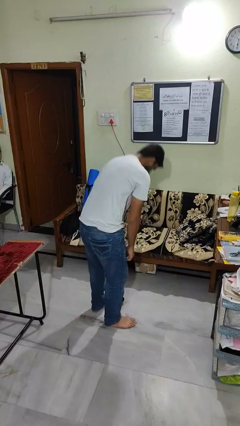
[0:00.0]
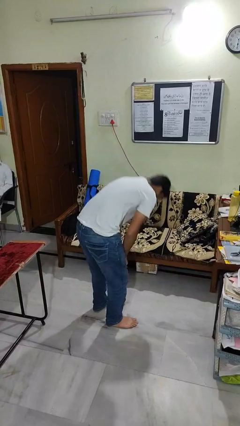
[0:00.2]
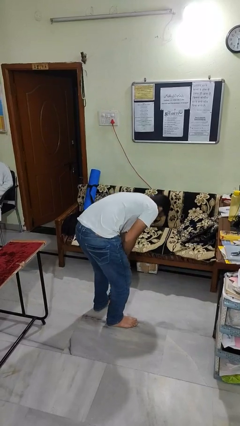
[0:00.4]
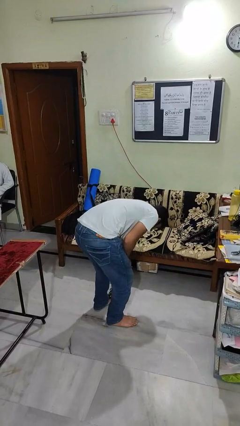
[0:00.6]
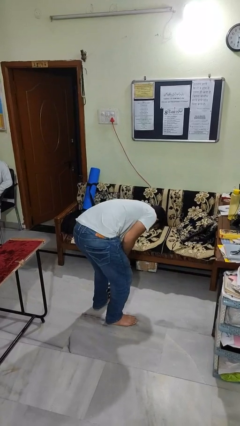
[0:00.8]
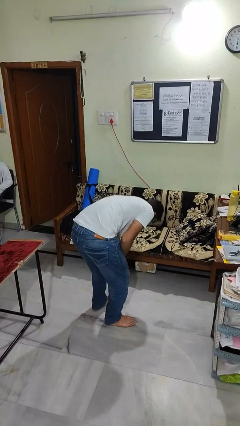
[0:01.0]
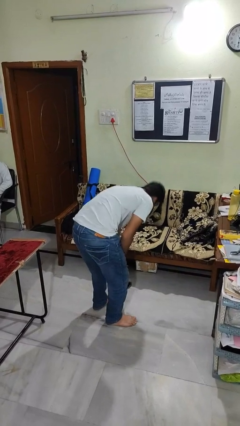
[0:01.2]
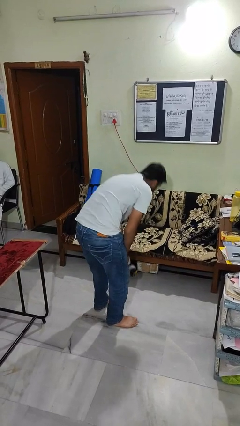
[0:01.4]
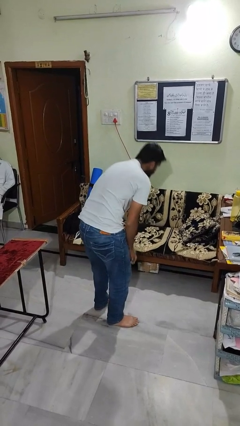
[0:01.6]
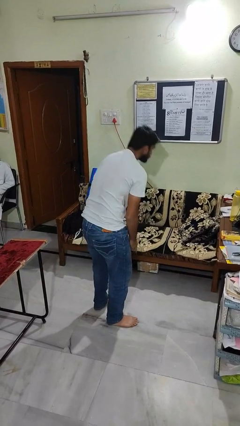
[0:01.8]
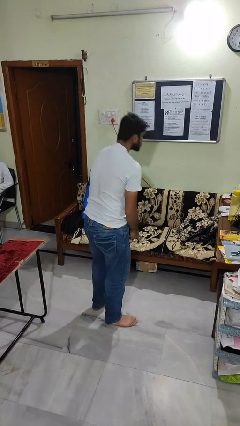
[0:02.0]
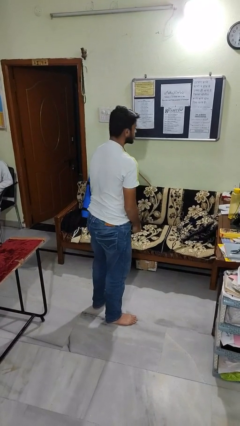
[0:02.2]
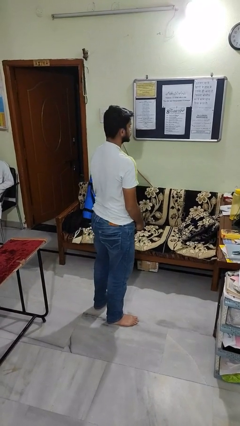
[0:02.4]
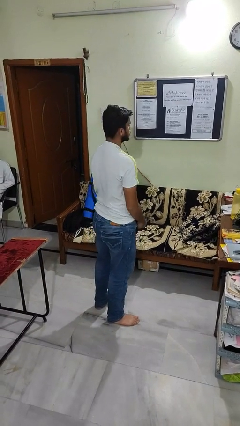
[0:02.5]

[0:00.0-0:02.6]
person picks up object from floor

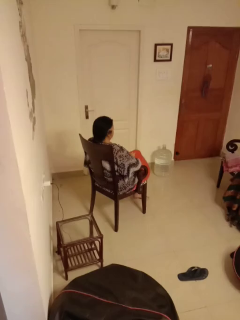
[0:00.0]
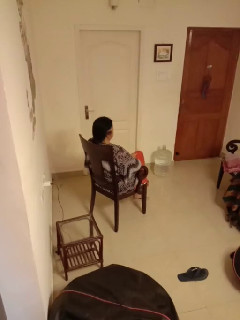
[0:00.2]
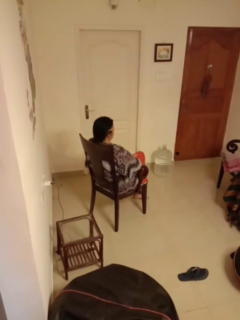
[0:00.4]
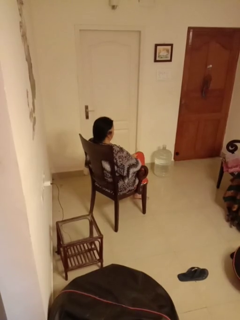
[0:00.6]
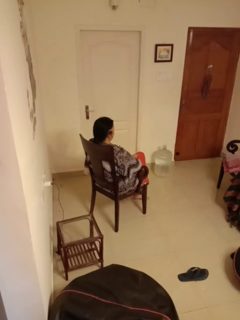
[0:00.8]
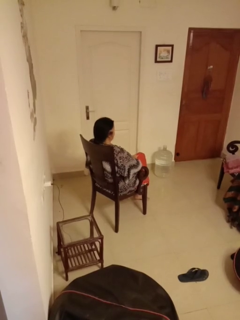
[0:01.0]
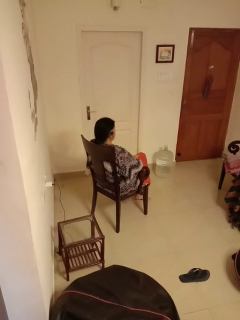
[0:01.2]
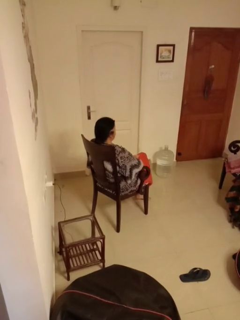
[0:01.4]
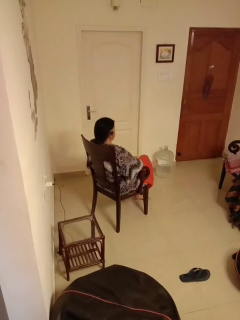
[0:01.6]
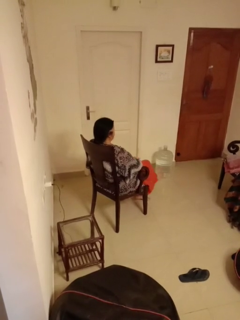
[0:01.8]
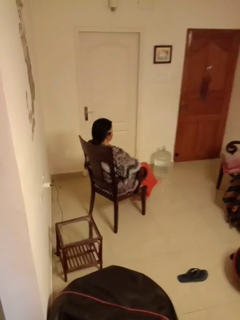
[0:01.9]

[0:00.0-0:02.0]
person crosses legs

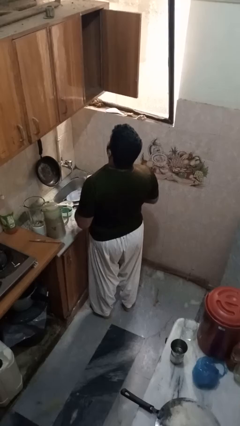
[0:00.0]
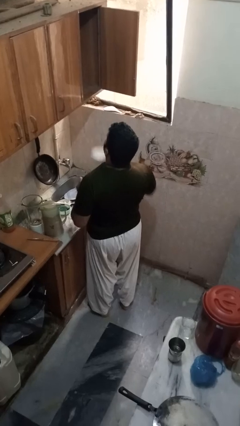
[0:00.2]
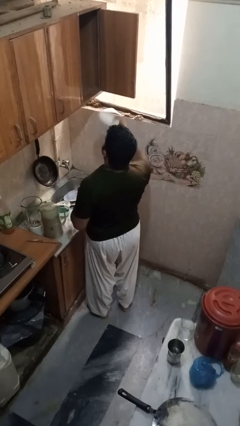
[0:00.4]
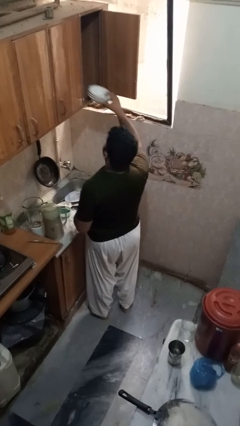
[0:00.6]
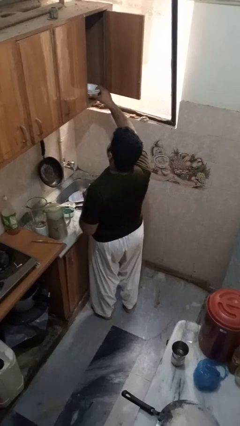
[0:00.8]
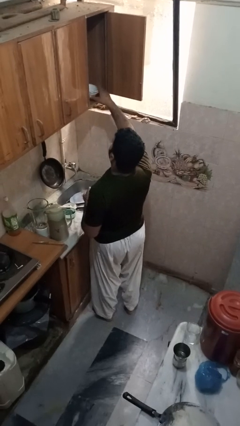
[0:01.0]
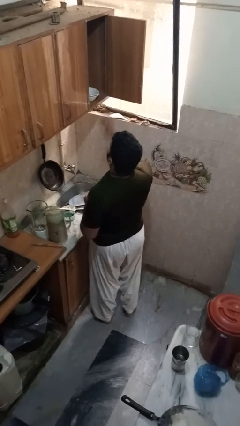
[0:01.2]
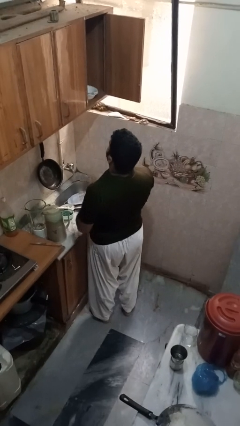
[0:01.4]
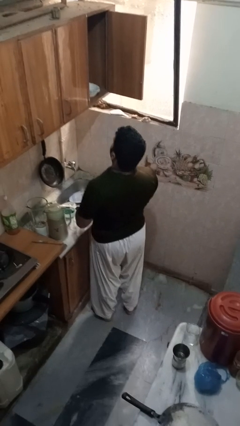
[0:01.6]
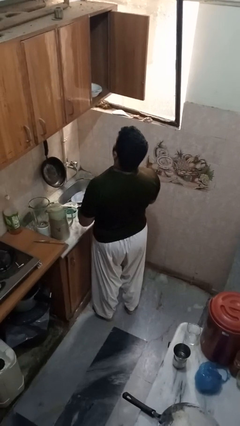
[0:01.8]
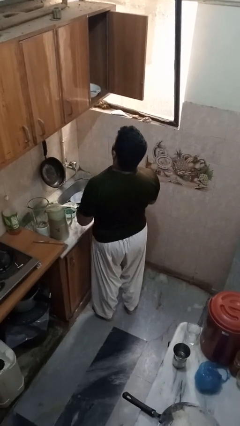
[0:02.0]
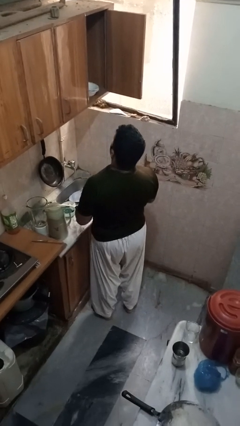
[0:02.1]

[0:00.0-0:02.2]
person puts object in cabinet

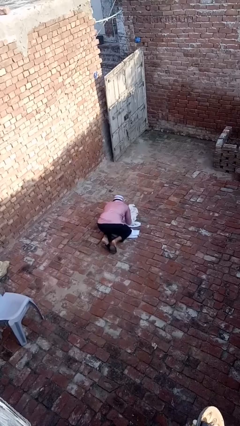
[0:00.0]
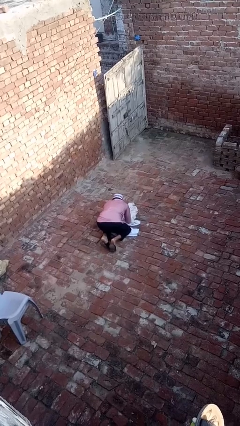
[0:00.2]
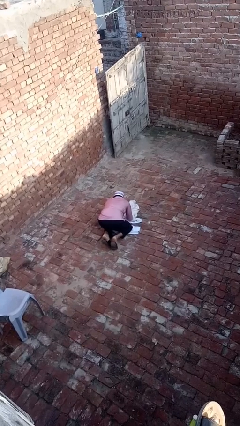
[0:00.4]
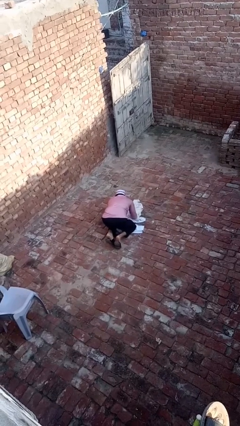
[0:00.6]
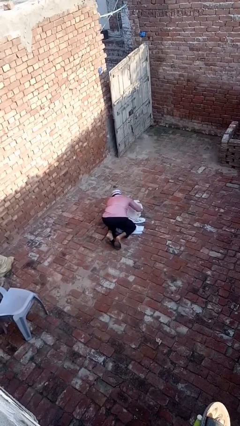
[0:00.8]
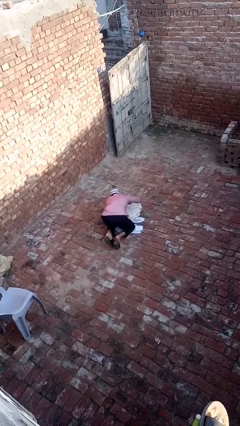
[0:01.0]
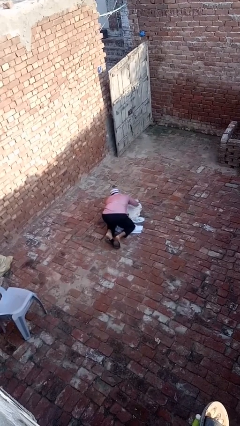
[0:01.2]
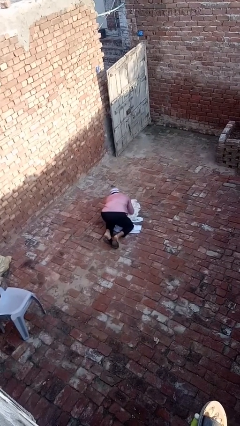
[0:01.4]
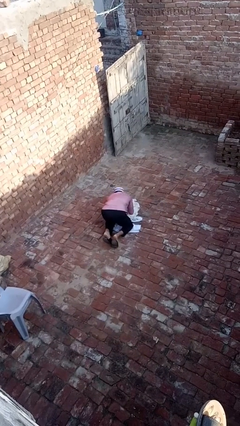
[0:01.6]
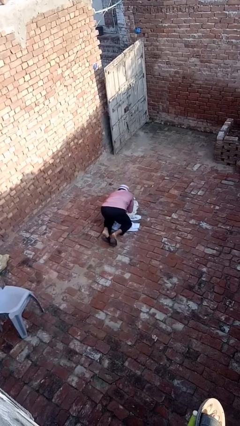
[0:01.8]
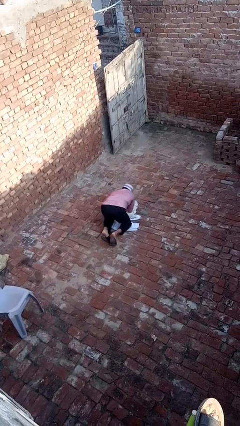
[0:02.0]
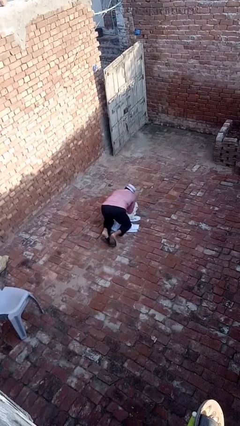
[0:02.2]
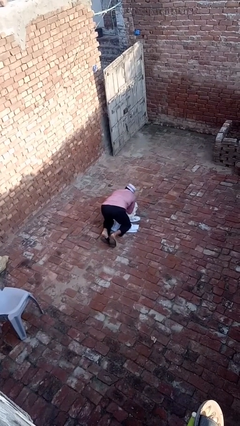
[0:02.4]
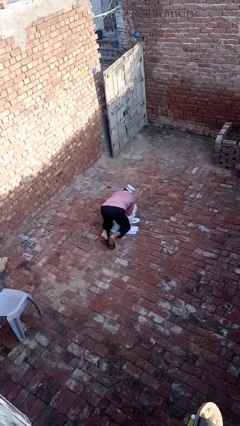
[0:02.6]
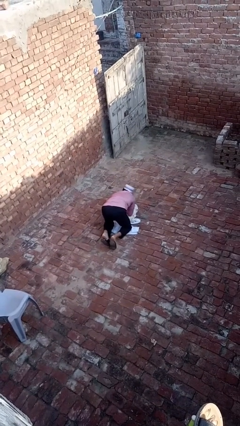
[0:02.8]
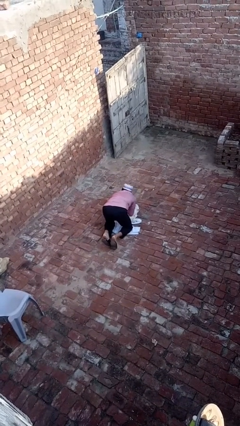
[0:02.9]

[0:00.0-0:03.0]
person crawls

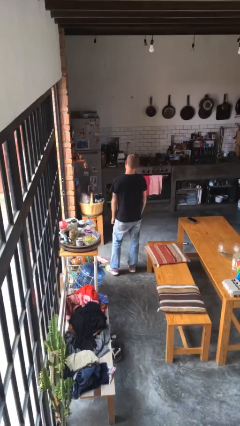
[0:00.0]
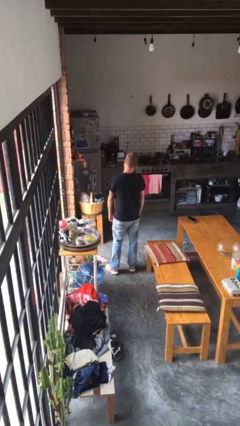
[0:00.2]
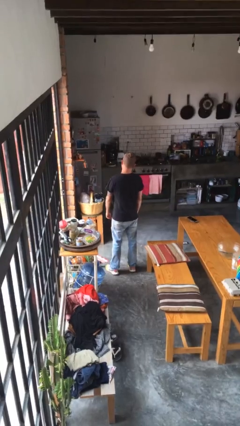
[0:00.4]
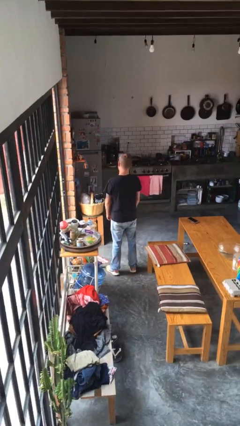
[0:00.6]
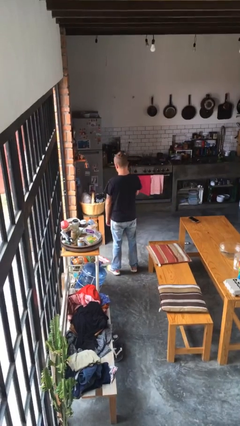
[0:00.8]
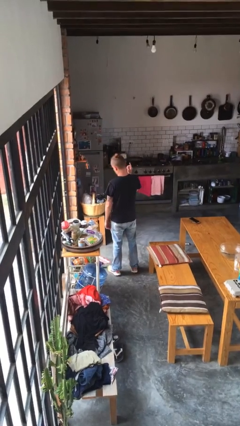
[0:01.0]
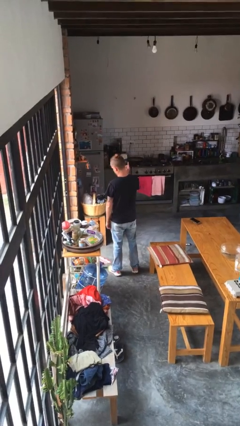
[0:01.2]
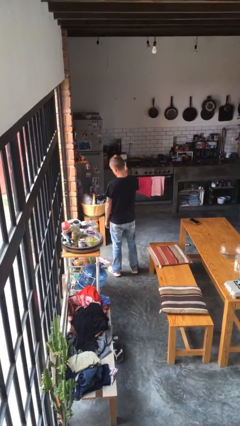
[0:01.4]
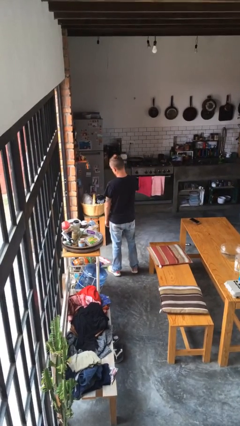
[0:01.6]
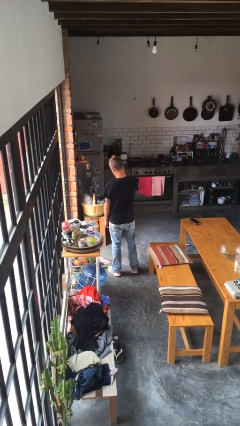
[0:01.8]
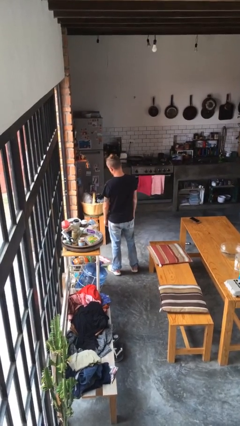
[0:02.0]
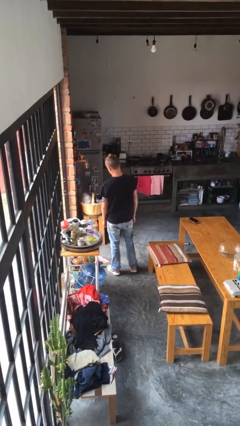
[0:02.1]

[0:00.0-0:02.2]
person gestures number one

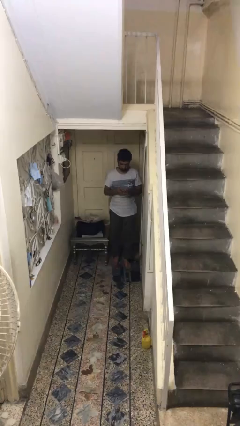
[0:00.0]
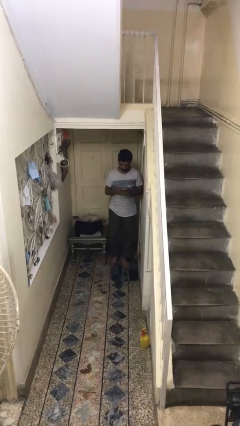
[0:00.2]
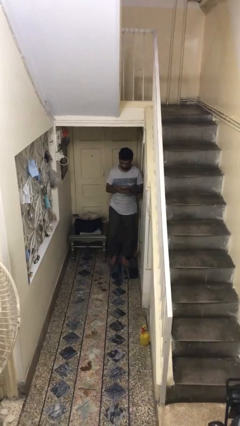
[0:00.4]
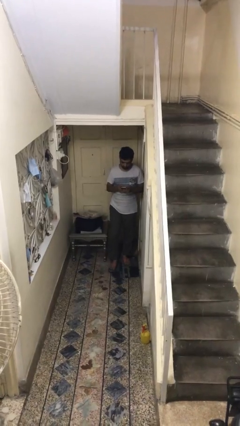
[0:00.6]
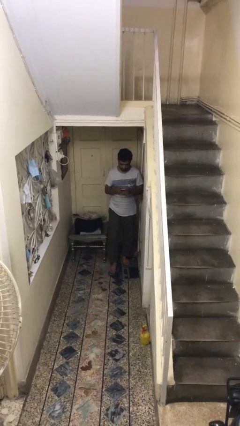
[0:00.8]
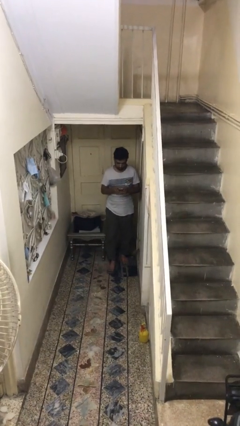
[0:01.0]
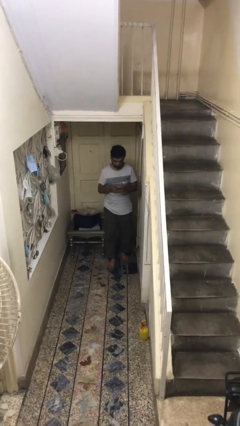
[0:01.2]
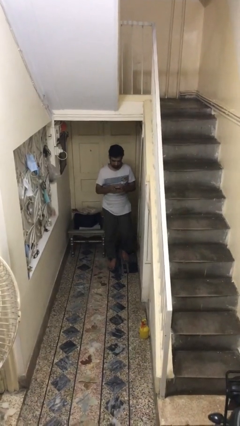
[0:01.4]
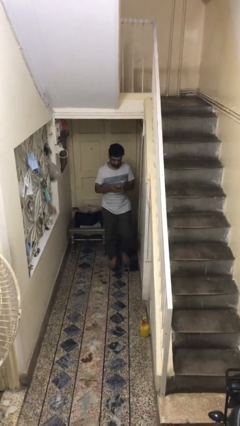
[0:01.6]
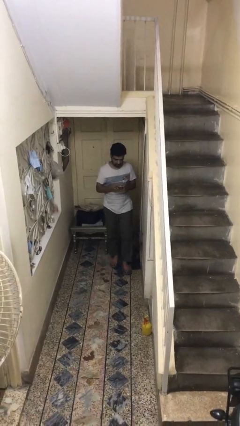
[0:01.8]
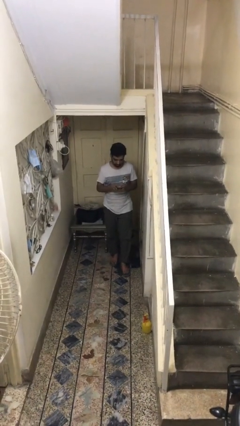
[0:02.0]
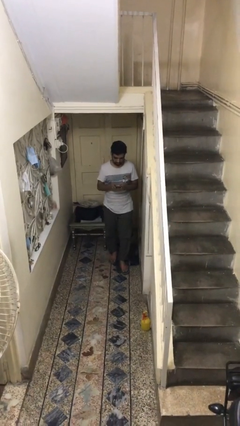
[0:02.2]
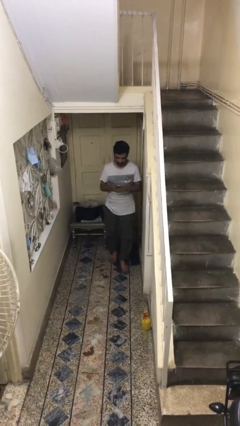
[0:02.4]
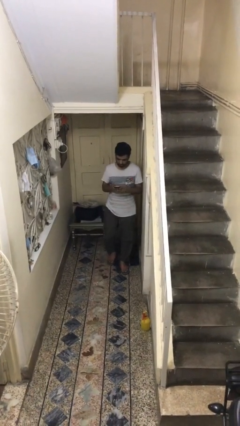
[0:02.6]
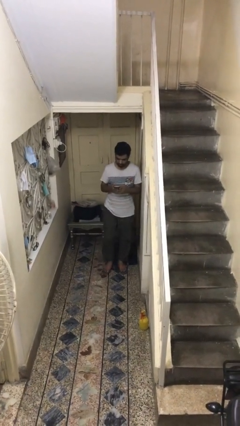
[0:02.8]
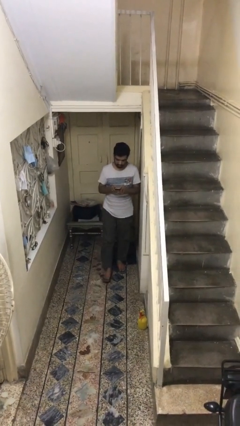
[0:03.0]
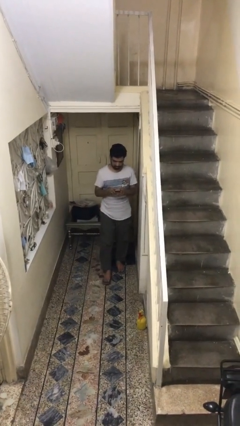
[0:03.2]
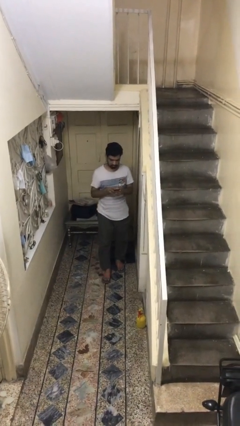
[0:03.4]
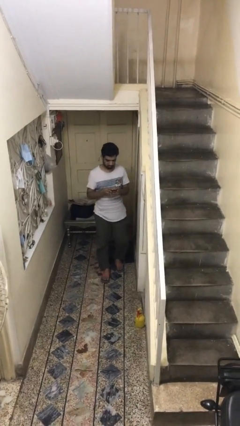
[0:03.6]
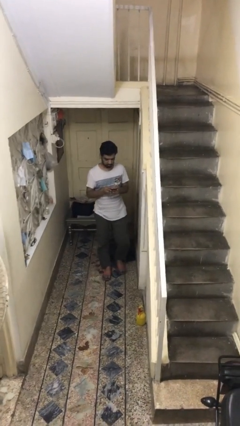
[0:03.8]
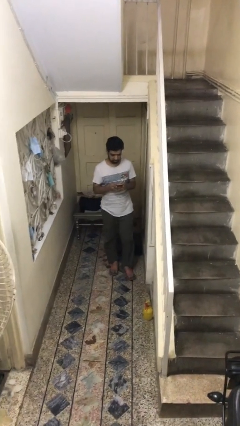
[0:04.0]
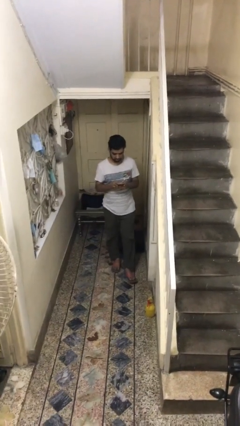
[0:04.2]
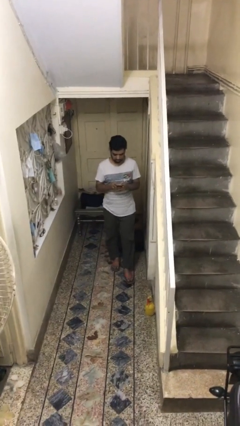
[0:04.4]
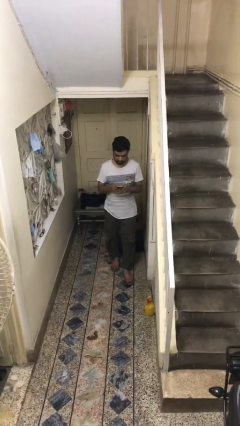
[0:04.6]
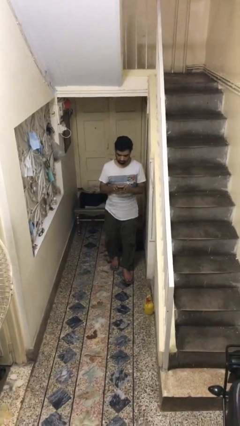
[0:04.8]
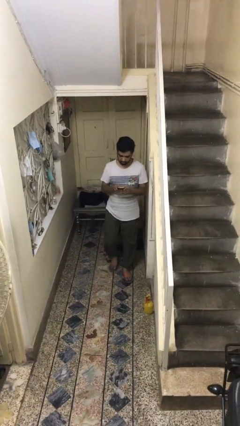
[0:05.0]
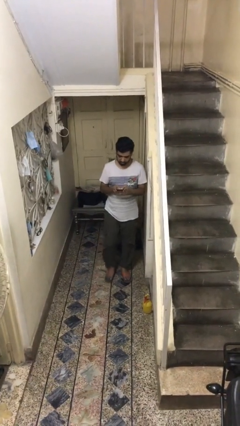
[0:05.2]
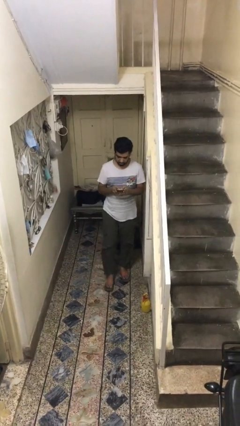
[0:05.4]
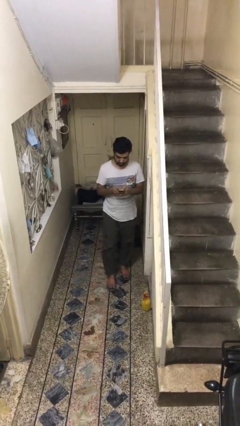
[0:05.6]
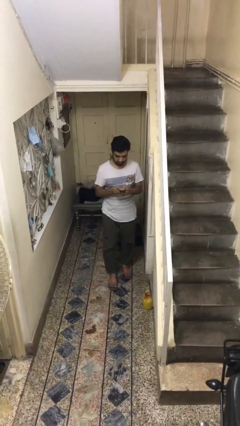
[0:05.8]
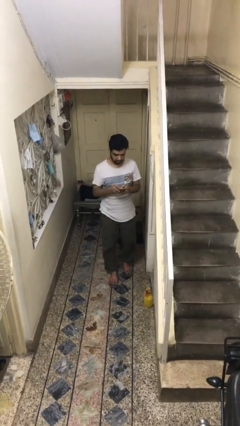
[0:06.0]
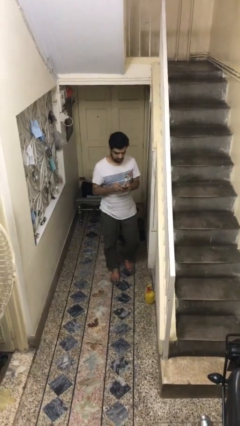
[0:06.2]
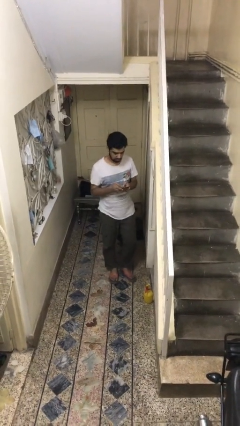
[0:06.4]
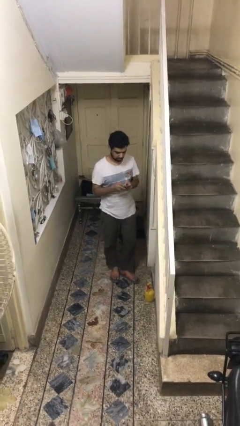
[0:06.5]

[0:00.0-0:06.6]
person texts on phone
